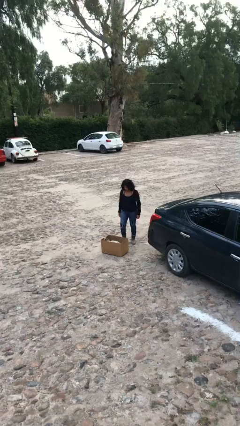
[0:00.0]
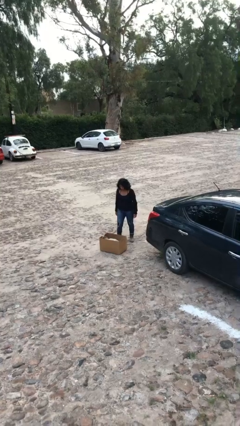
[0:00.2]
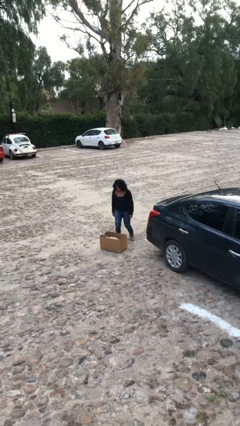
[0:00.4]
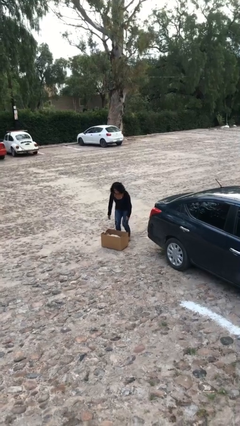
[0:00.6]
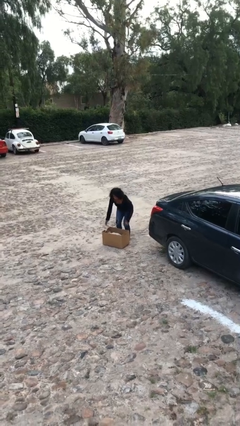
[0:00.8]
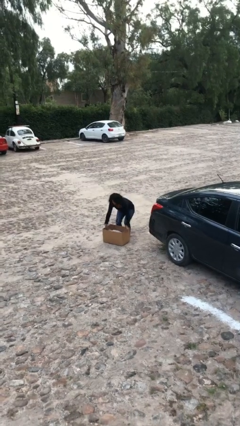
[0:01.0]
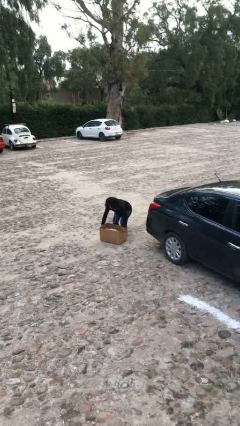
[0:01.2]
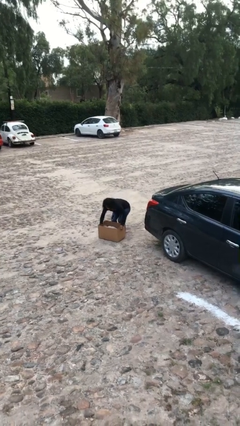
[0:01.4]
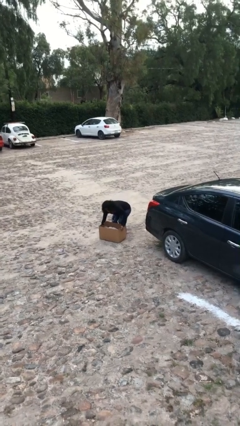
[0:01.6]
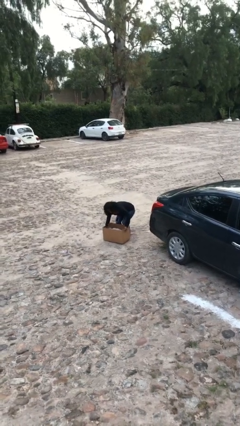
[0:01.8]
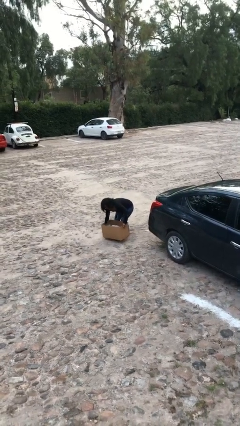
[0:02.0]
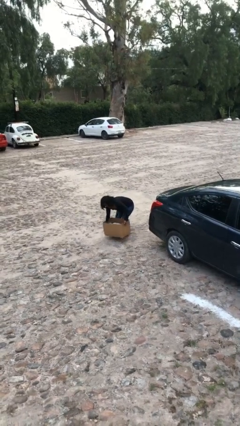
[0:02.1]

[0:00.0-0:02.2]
person picks up object from floor

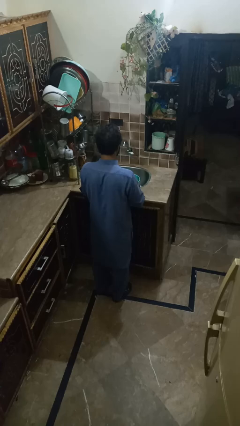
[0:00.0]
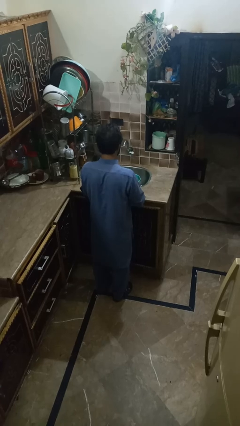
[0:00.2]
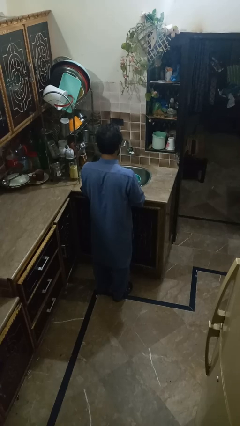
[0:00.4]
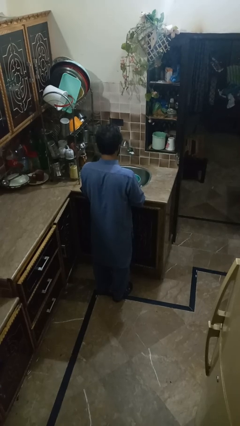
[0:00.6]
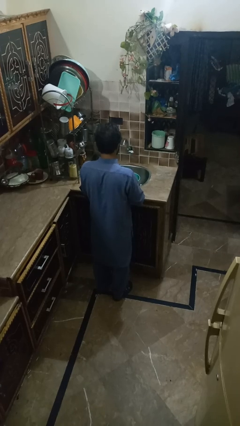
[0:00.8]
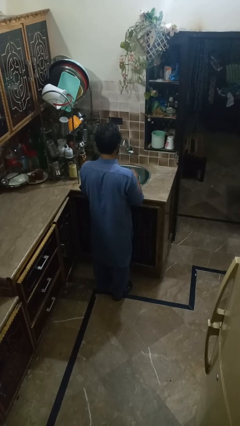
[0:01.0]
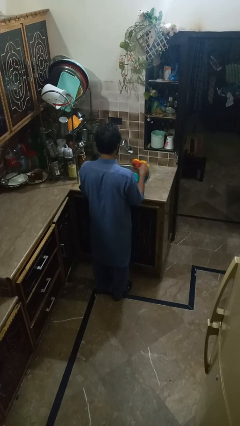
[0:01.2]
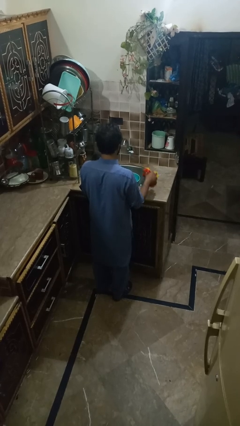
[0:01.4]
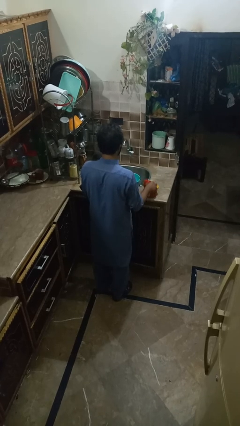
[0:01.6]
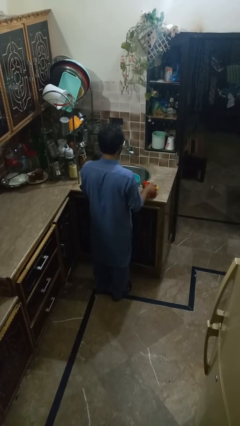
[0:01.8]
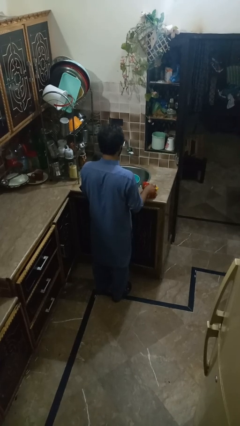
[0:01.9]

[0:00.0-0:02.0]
person pours into bowl

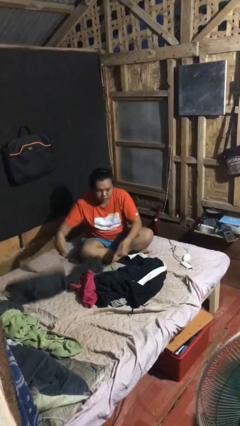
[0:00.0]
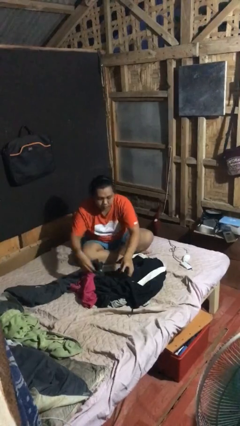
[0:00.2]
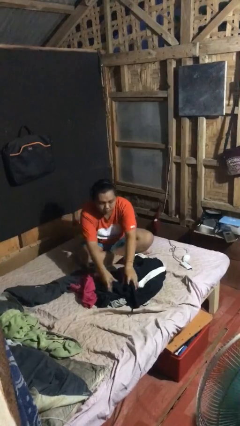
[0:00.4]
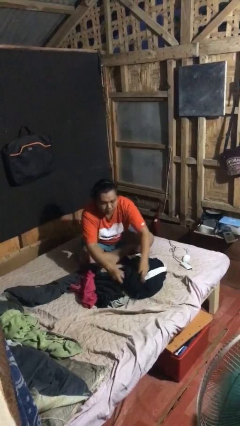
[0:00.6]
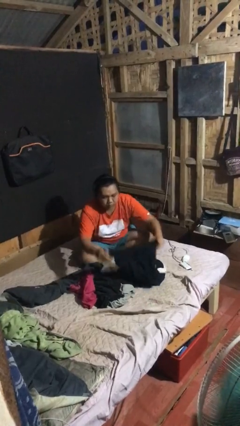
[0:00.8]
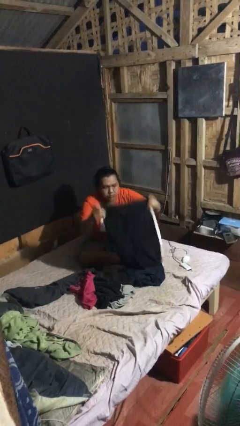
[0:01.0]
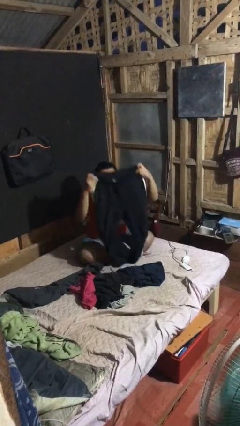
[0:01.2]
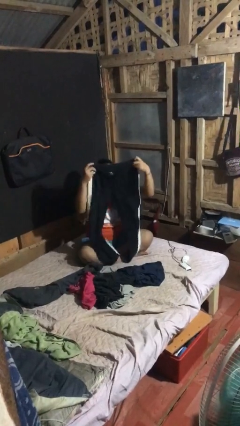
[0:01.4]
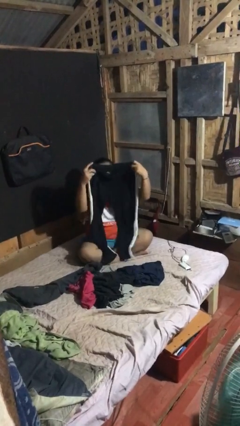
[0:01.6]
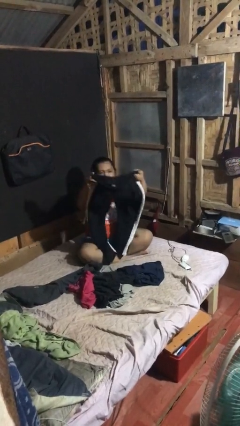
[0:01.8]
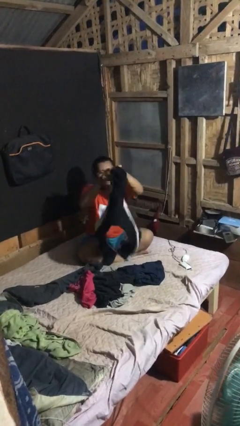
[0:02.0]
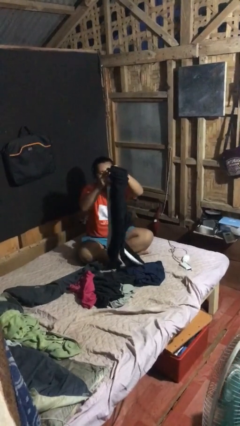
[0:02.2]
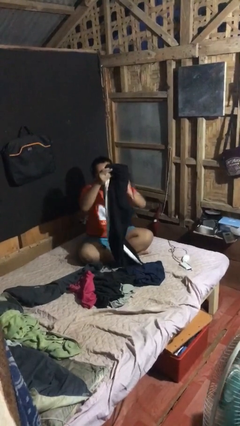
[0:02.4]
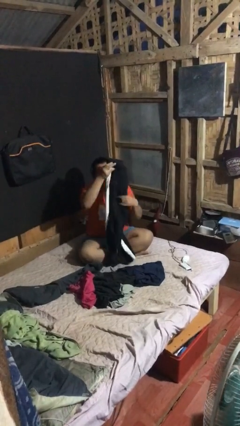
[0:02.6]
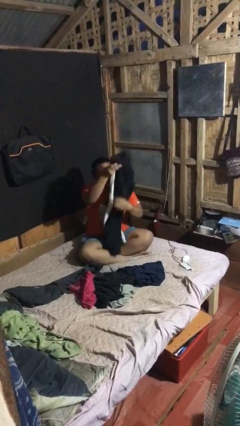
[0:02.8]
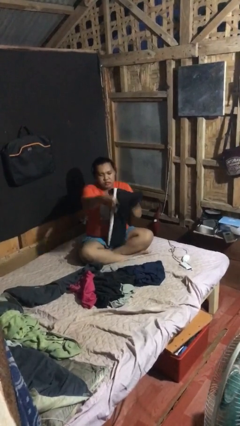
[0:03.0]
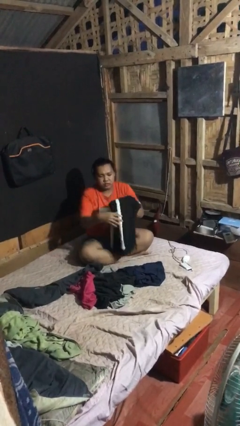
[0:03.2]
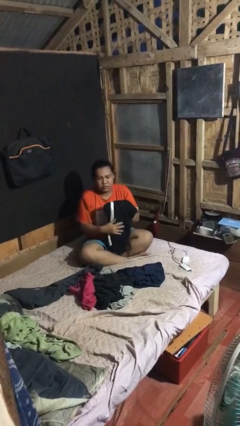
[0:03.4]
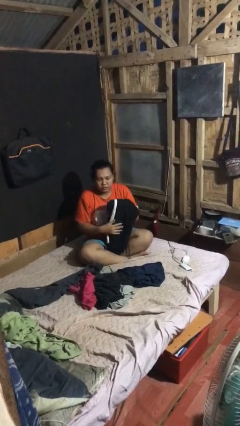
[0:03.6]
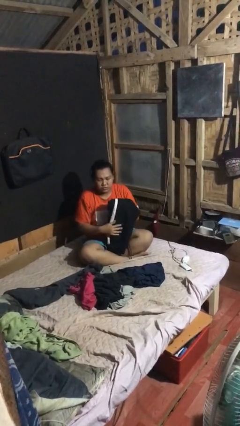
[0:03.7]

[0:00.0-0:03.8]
person folds pants

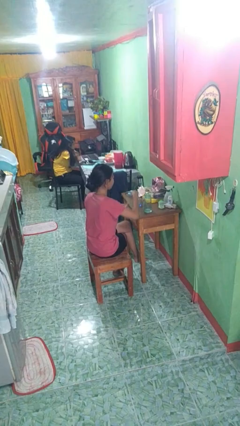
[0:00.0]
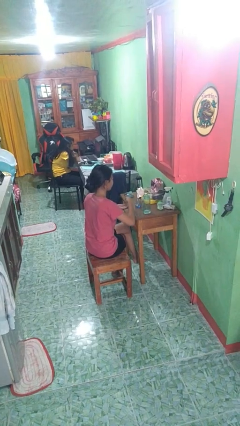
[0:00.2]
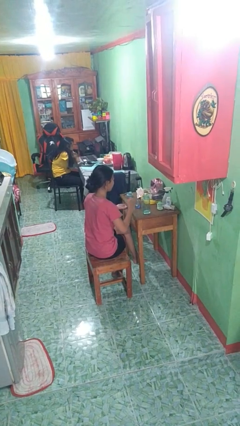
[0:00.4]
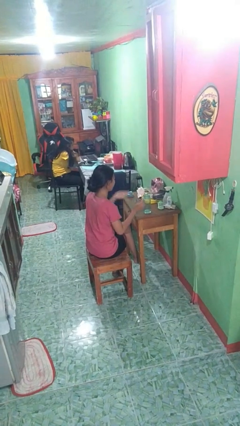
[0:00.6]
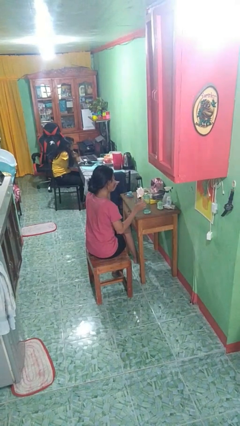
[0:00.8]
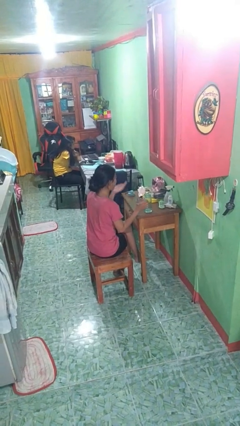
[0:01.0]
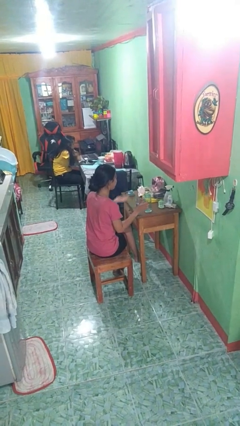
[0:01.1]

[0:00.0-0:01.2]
person takes medicine pills

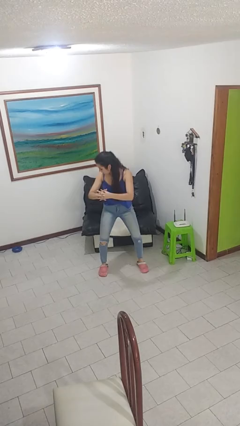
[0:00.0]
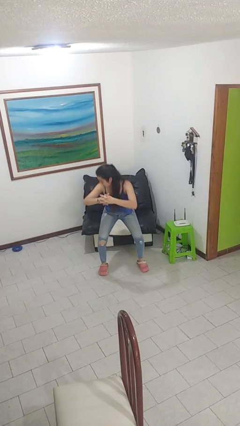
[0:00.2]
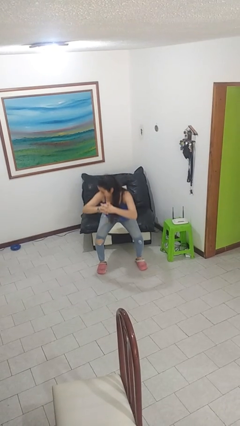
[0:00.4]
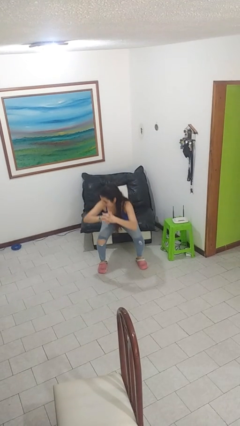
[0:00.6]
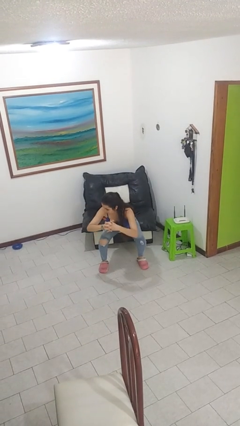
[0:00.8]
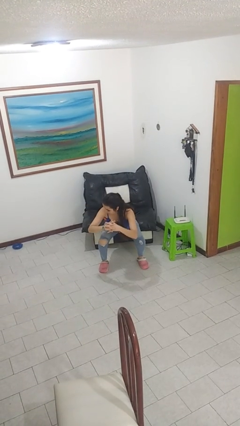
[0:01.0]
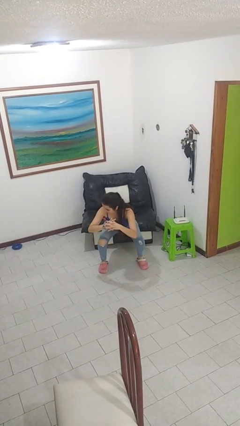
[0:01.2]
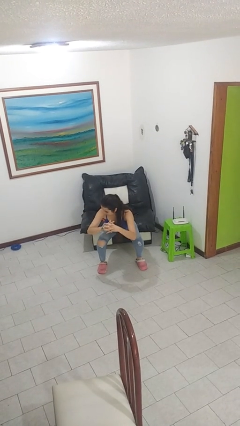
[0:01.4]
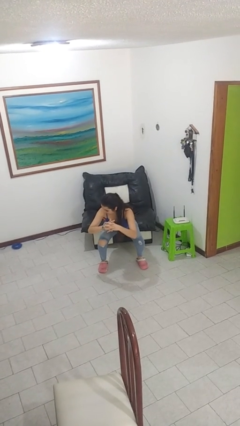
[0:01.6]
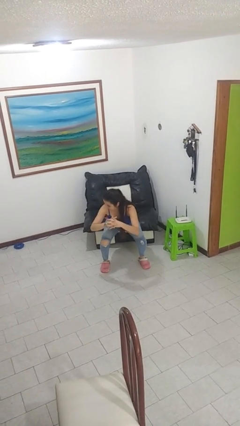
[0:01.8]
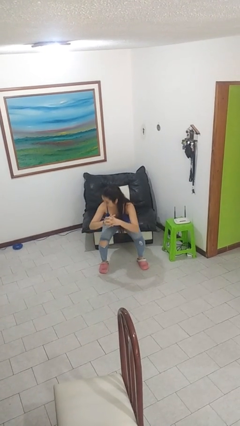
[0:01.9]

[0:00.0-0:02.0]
person squats

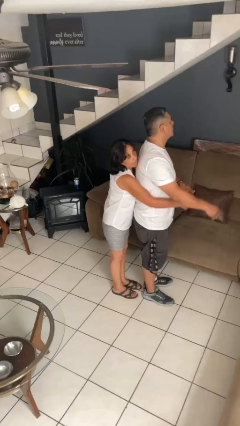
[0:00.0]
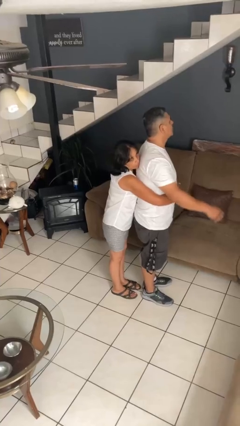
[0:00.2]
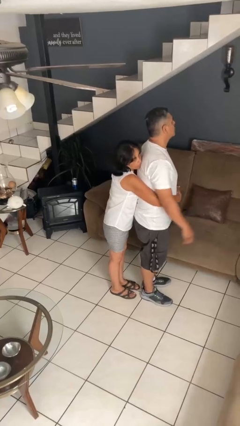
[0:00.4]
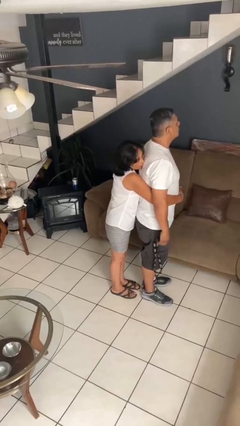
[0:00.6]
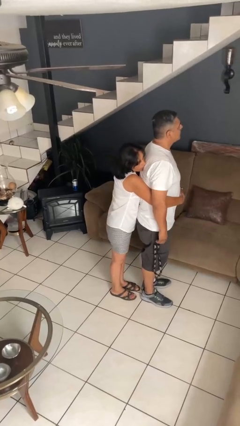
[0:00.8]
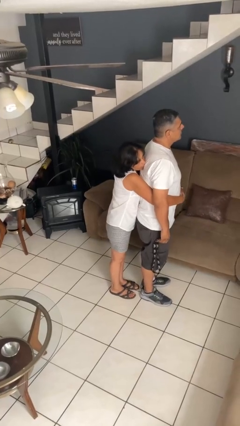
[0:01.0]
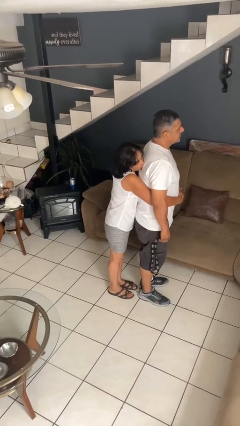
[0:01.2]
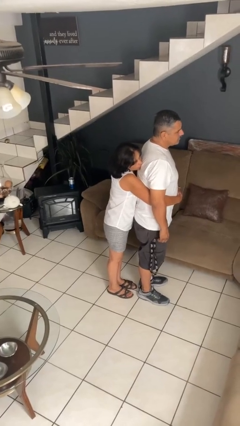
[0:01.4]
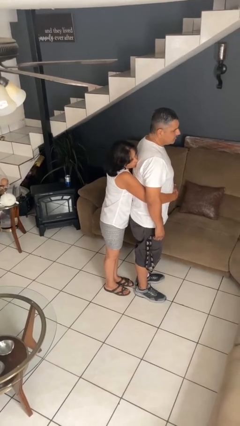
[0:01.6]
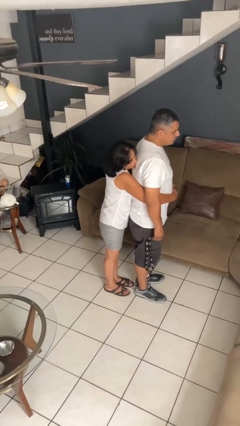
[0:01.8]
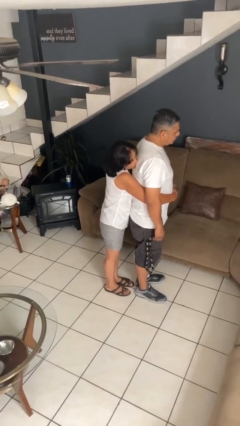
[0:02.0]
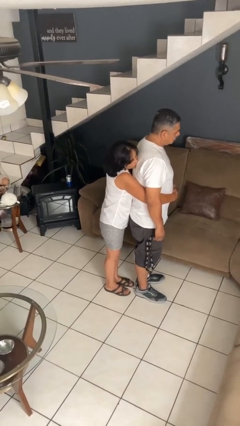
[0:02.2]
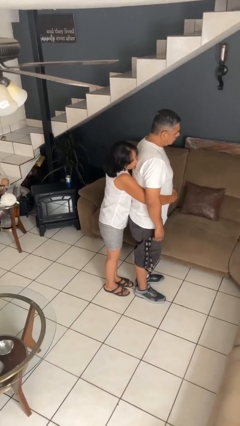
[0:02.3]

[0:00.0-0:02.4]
person hugs person from behind

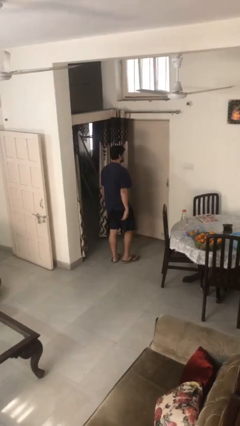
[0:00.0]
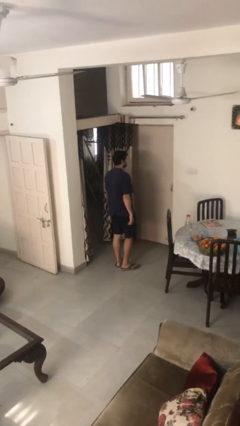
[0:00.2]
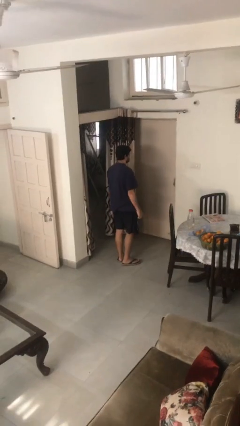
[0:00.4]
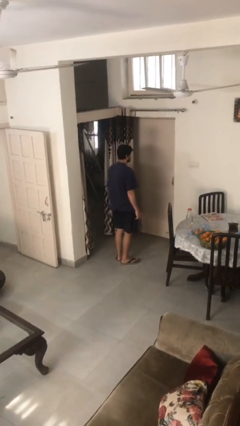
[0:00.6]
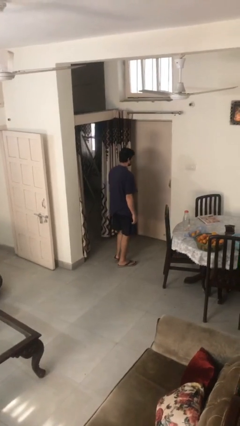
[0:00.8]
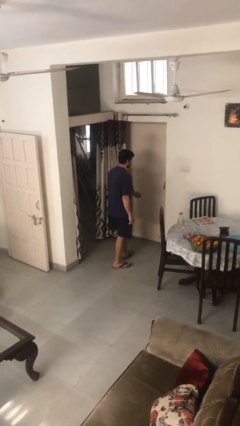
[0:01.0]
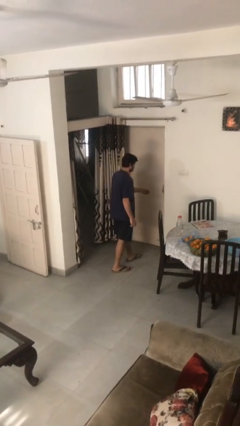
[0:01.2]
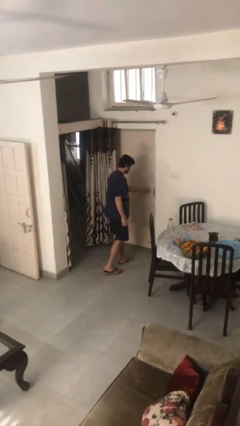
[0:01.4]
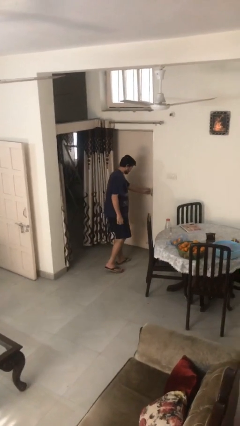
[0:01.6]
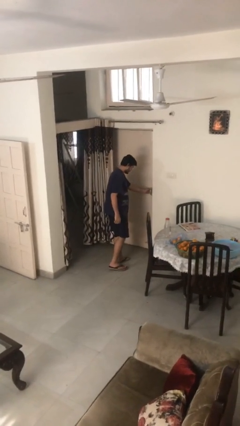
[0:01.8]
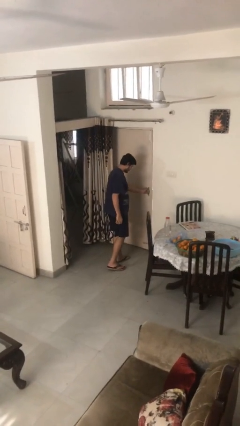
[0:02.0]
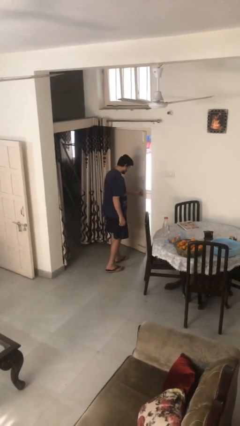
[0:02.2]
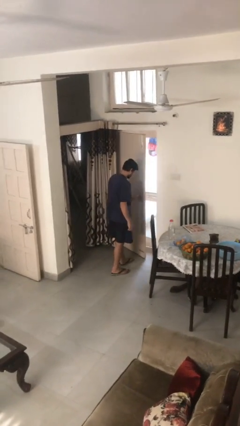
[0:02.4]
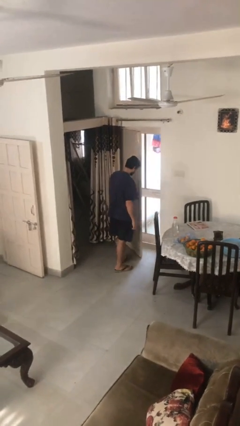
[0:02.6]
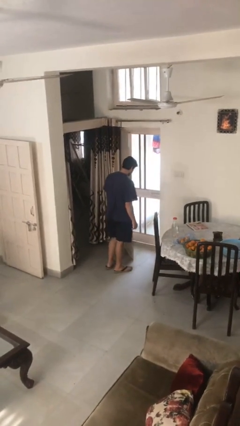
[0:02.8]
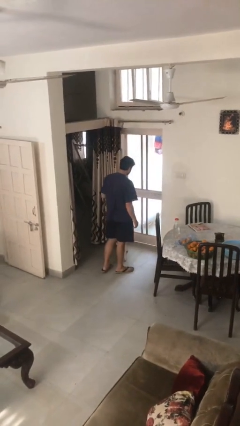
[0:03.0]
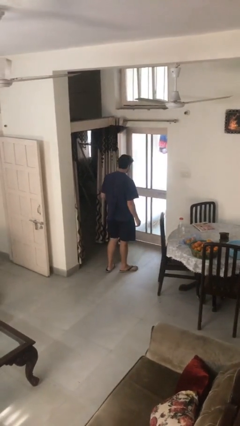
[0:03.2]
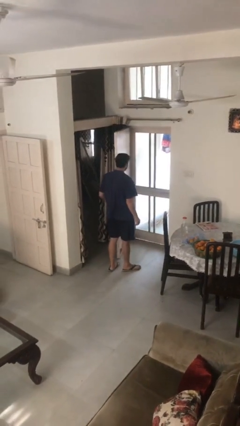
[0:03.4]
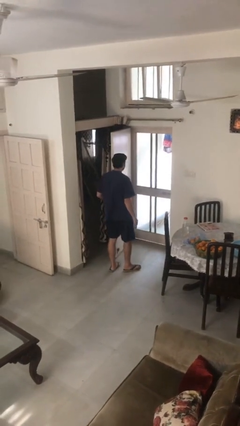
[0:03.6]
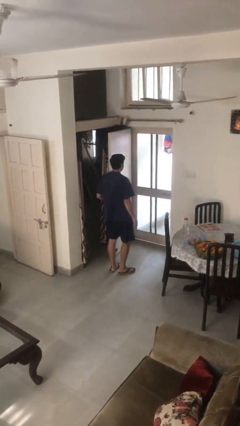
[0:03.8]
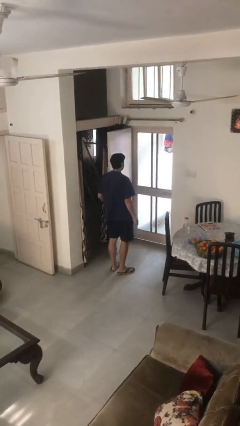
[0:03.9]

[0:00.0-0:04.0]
person opens facility door
